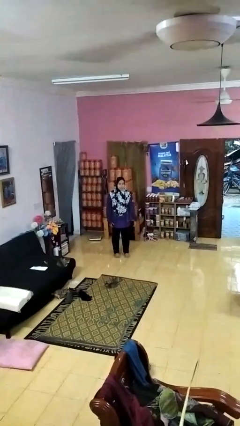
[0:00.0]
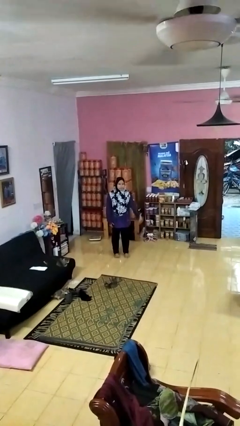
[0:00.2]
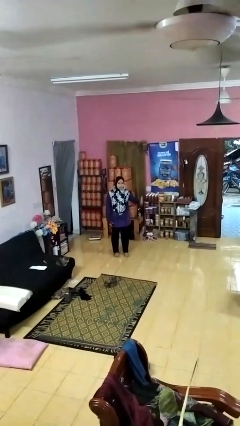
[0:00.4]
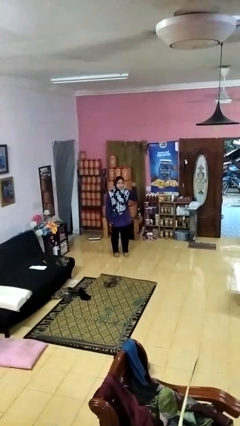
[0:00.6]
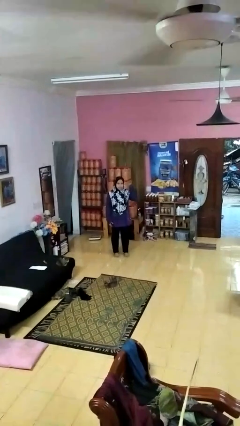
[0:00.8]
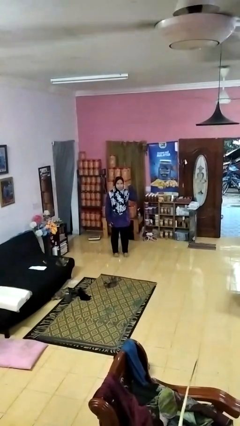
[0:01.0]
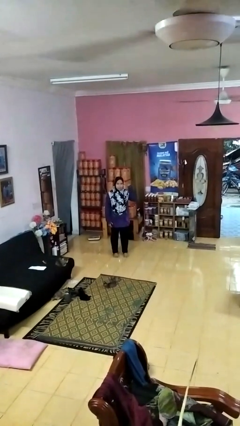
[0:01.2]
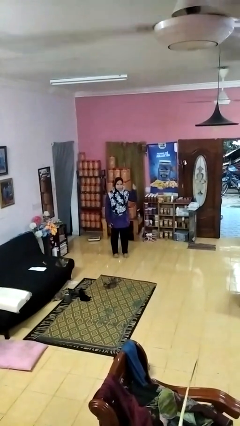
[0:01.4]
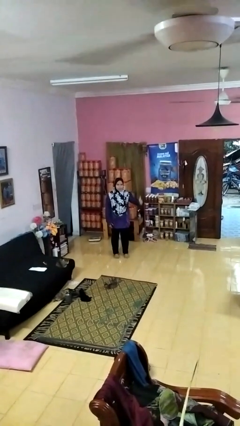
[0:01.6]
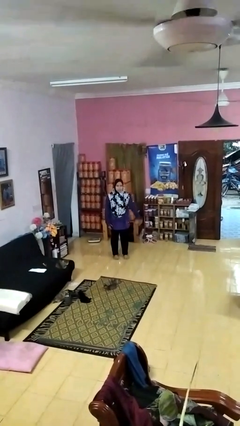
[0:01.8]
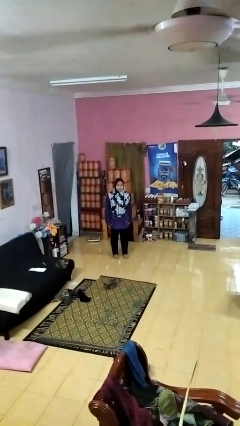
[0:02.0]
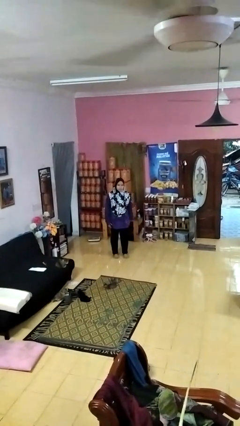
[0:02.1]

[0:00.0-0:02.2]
person gestures behind me

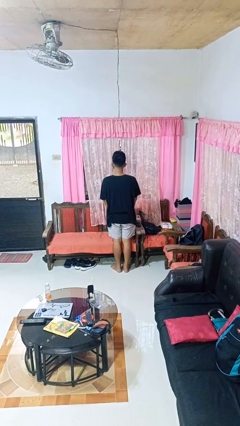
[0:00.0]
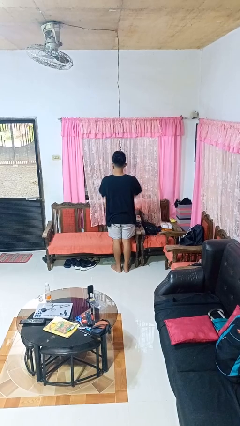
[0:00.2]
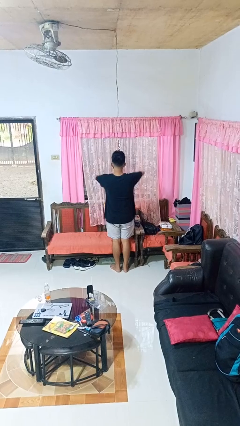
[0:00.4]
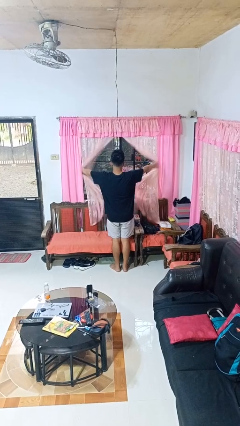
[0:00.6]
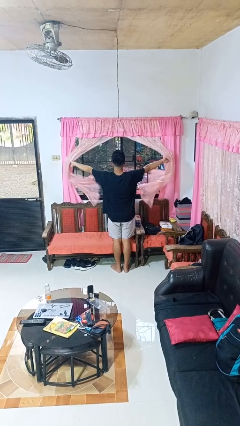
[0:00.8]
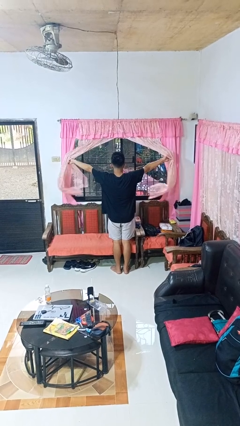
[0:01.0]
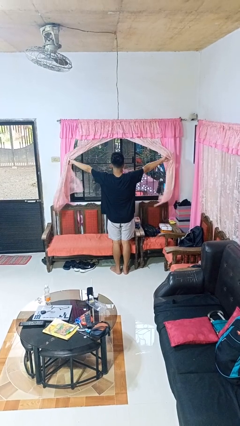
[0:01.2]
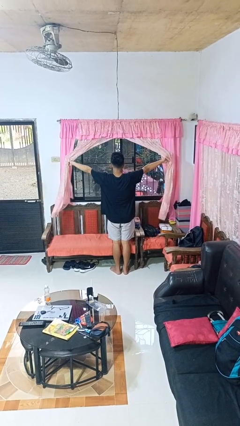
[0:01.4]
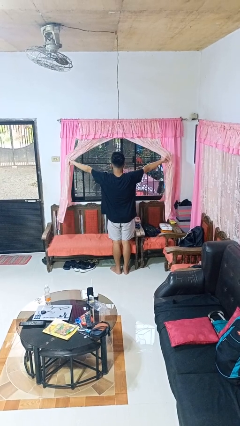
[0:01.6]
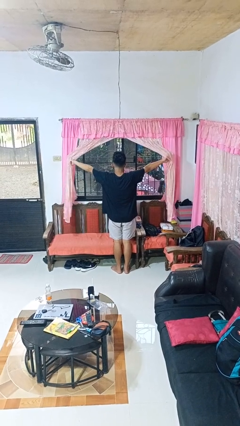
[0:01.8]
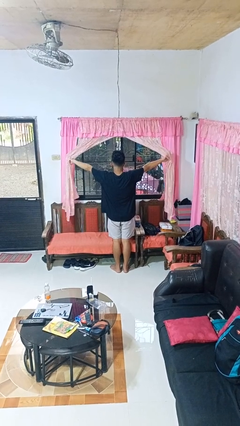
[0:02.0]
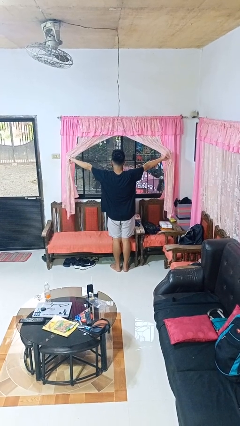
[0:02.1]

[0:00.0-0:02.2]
person opens curtains

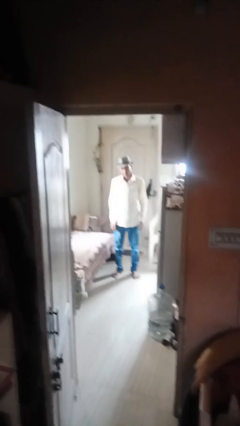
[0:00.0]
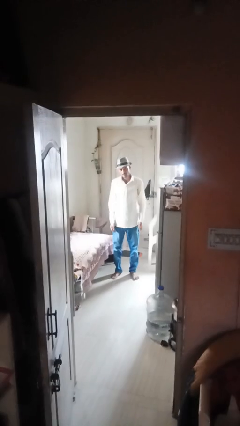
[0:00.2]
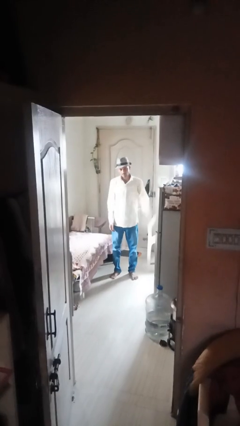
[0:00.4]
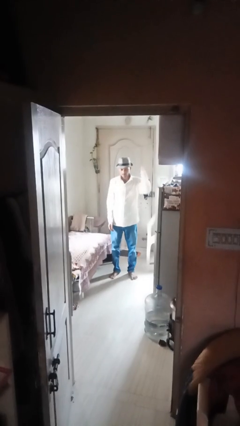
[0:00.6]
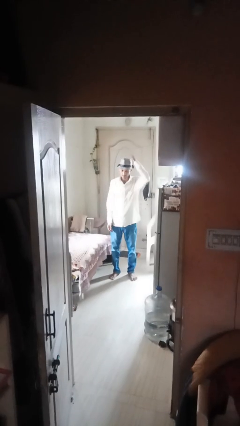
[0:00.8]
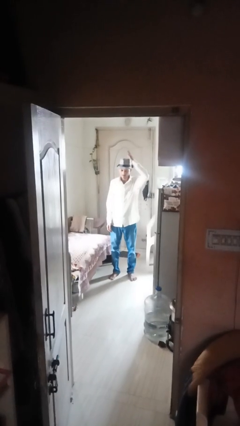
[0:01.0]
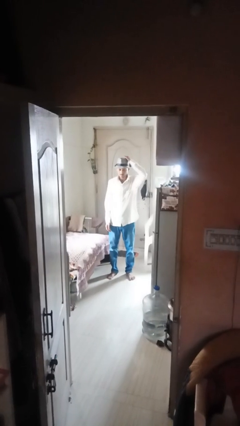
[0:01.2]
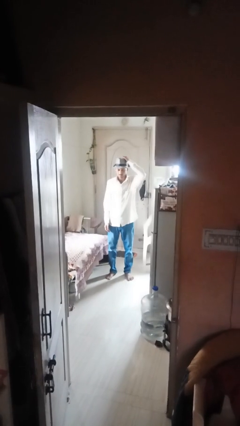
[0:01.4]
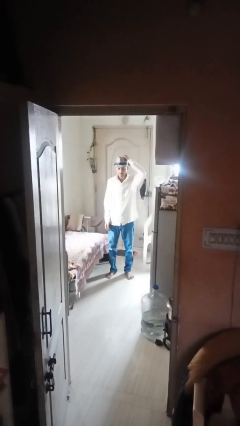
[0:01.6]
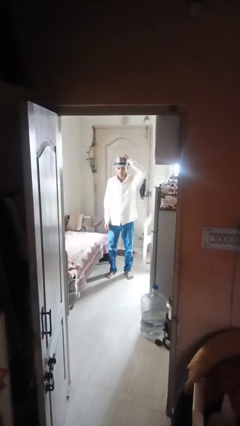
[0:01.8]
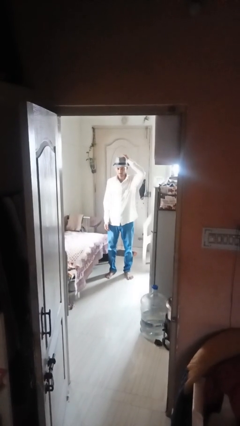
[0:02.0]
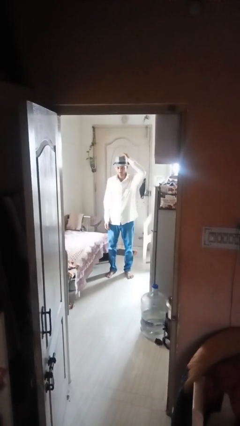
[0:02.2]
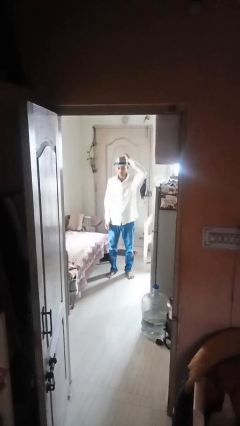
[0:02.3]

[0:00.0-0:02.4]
person pats head

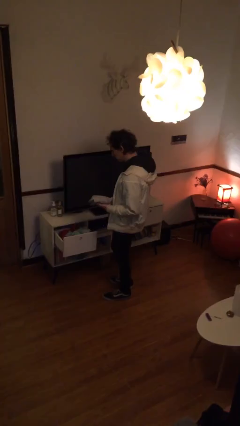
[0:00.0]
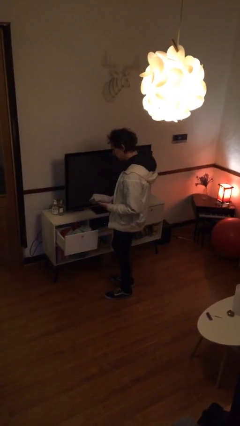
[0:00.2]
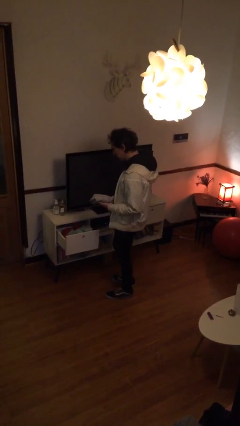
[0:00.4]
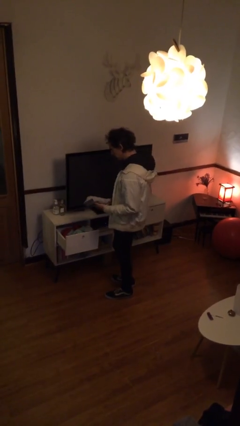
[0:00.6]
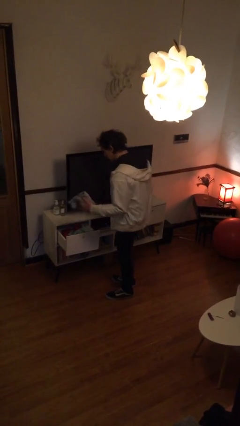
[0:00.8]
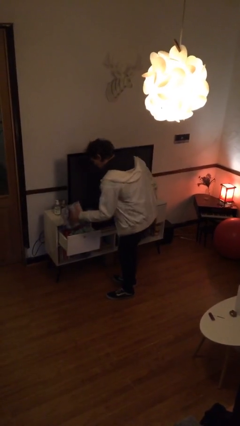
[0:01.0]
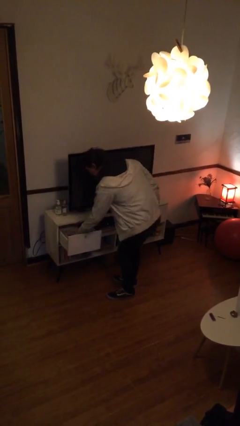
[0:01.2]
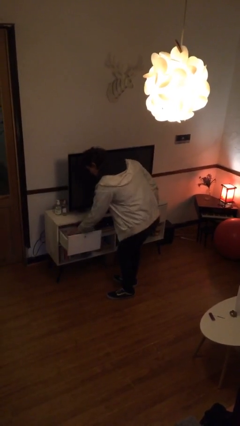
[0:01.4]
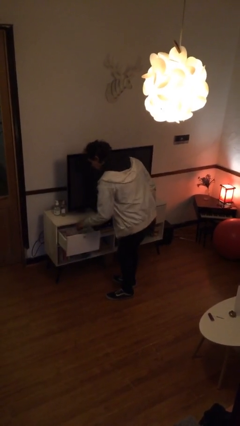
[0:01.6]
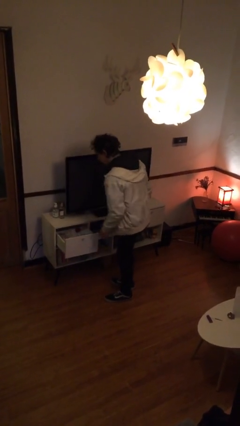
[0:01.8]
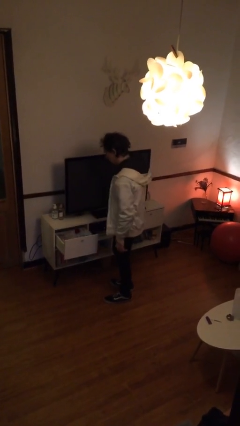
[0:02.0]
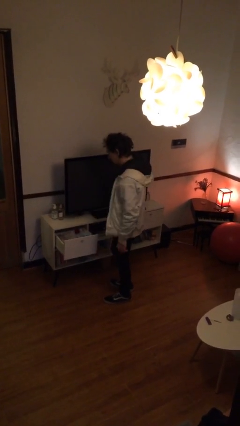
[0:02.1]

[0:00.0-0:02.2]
person puts clothes into dresser

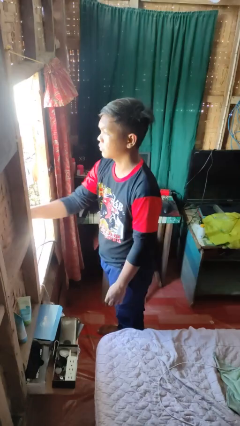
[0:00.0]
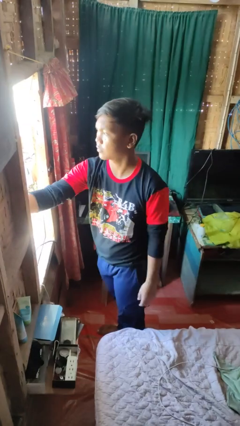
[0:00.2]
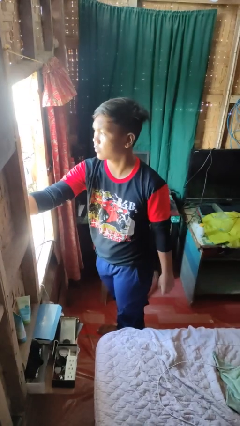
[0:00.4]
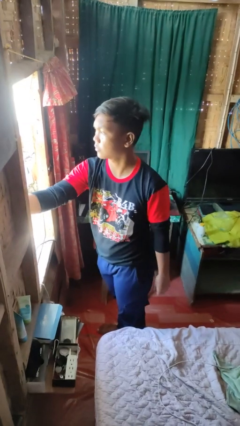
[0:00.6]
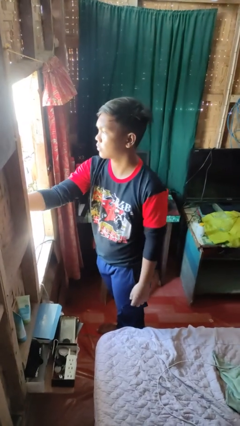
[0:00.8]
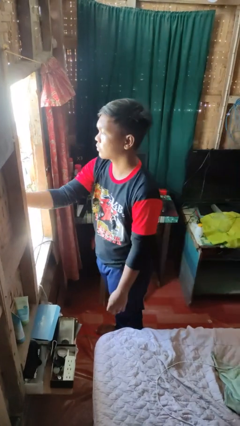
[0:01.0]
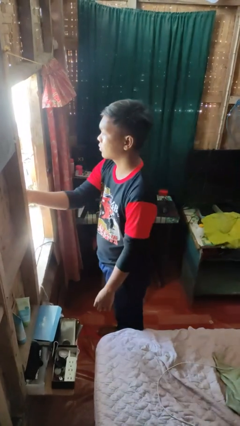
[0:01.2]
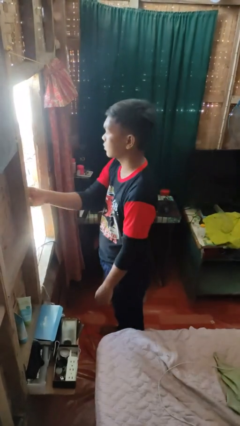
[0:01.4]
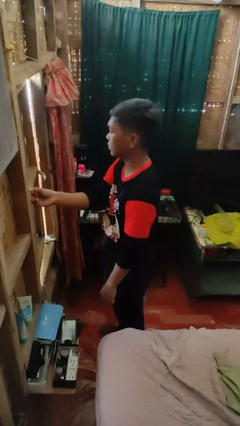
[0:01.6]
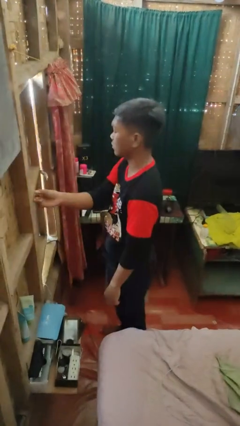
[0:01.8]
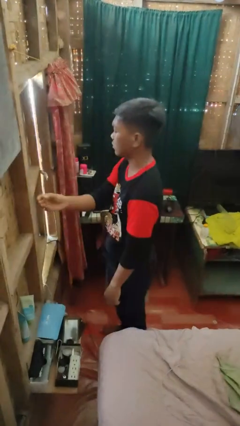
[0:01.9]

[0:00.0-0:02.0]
person closes home window

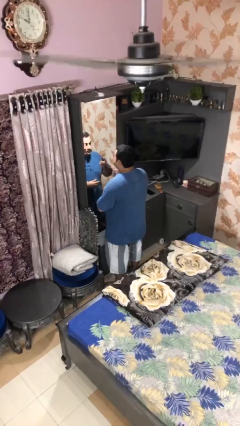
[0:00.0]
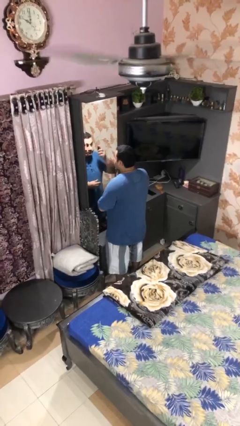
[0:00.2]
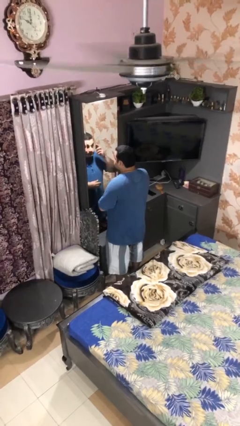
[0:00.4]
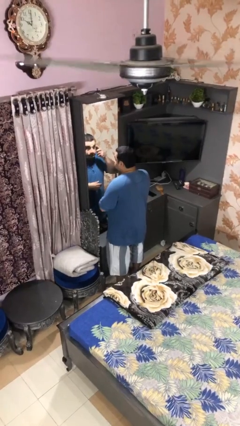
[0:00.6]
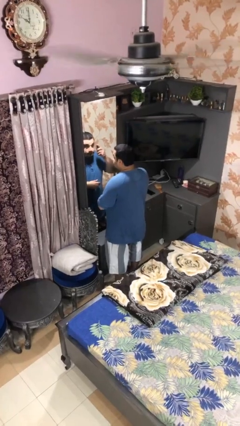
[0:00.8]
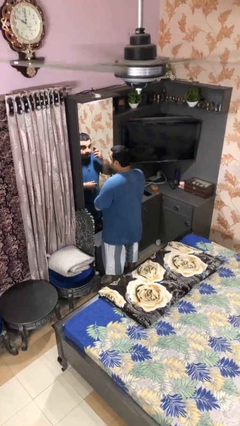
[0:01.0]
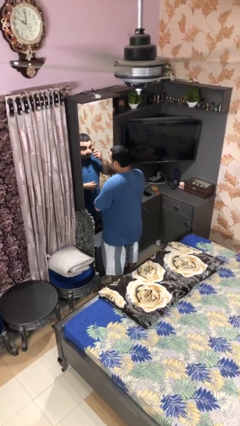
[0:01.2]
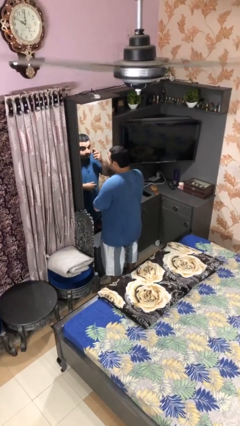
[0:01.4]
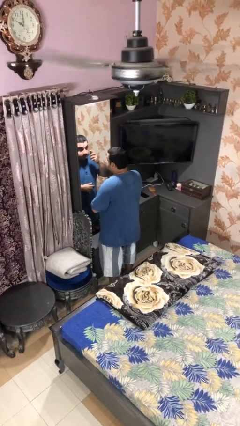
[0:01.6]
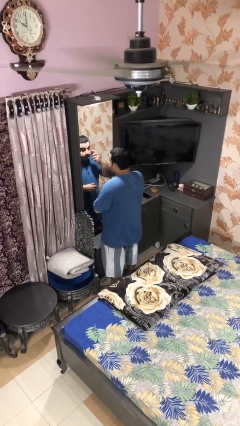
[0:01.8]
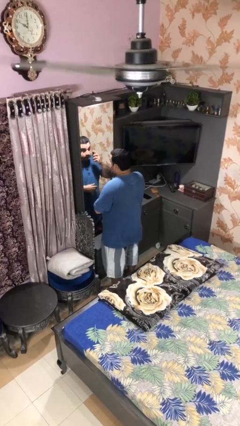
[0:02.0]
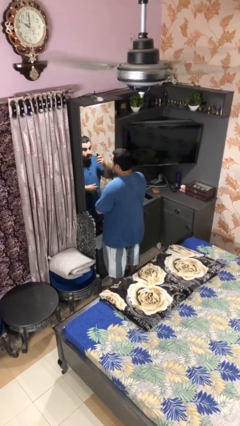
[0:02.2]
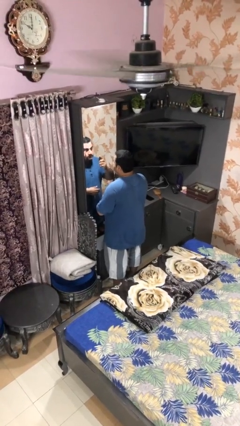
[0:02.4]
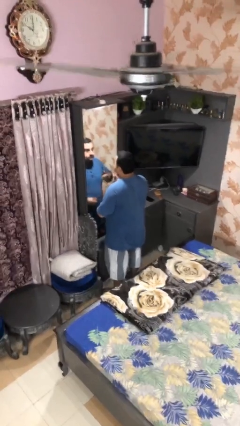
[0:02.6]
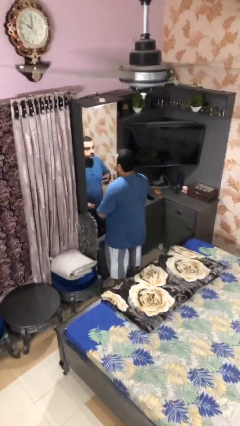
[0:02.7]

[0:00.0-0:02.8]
person applies foundation makeup

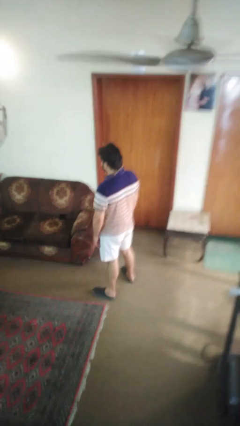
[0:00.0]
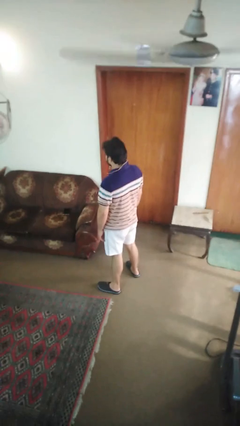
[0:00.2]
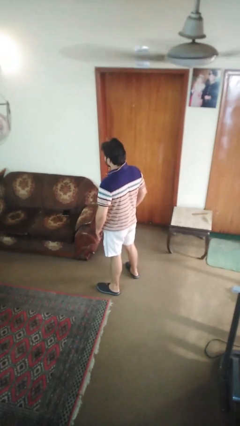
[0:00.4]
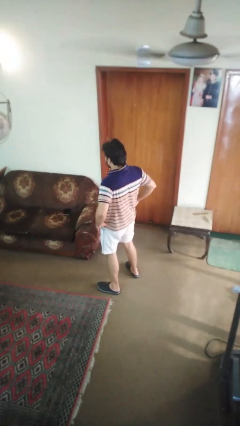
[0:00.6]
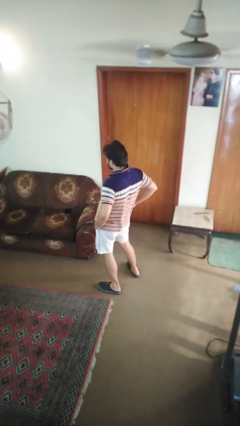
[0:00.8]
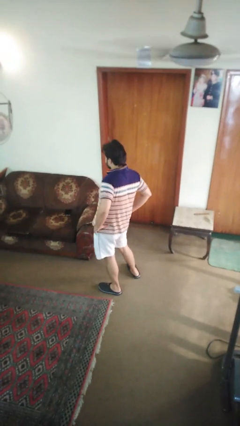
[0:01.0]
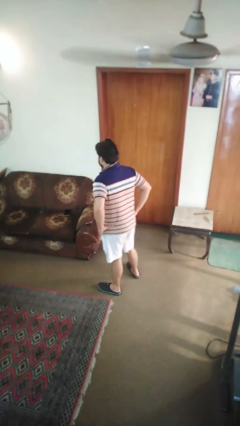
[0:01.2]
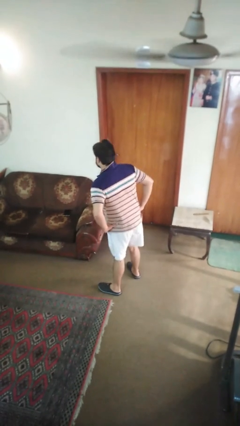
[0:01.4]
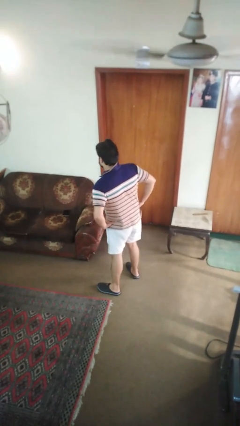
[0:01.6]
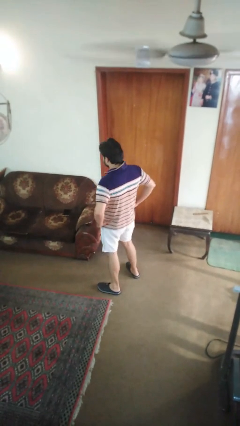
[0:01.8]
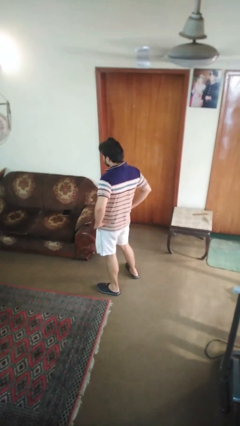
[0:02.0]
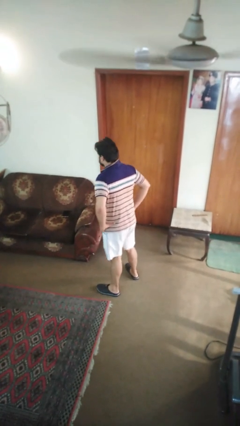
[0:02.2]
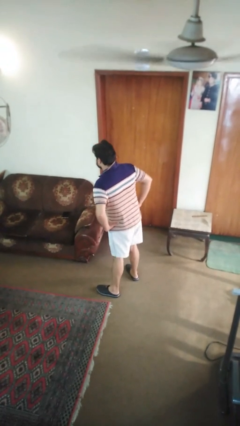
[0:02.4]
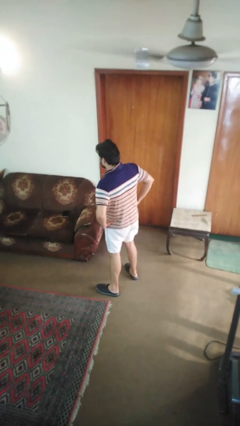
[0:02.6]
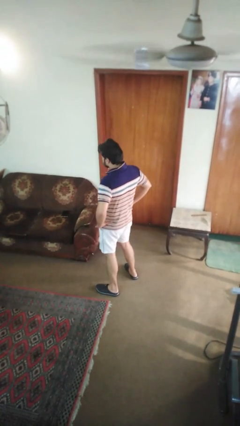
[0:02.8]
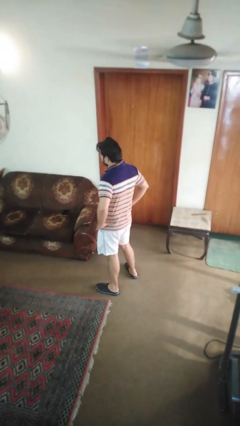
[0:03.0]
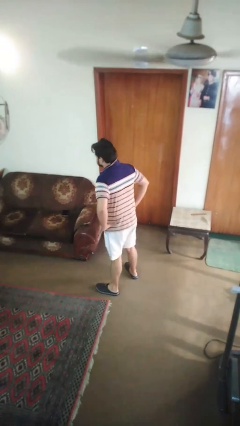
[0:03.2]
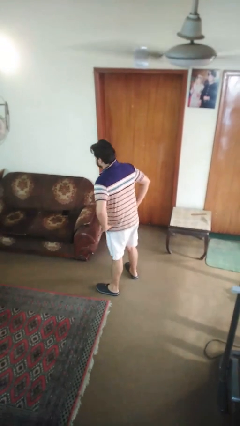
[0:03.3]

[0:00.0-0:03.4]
person wiggles hips
